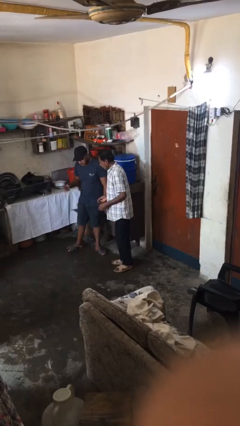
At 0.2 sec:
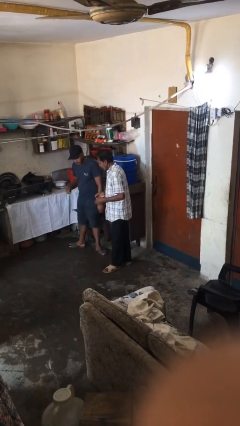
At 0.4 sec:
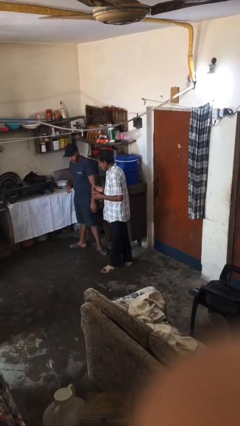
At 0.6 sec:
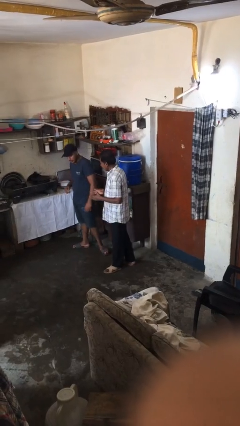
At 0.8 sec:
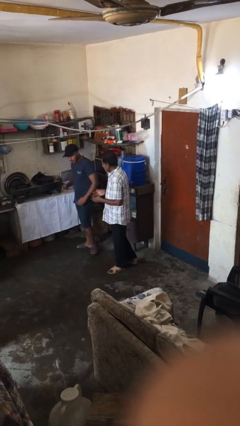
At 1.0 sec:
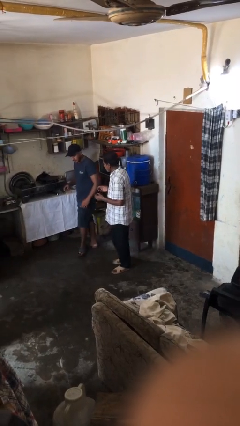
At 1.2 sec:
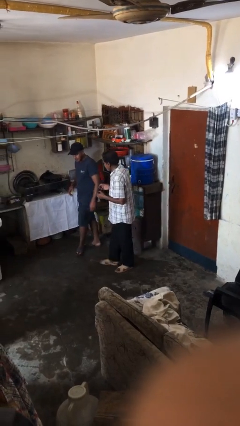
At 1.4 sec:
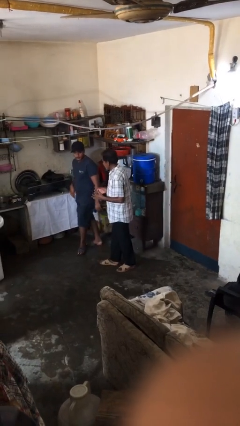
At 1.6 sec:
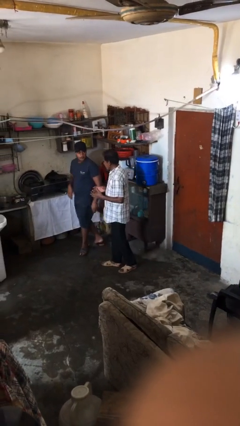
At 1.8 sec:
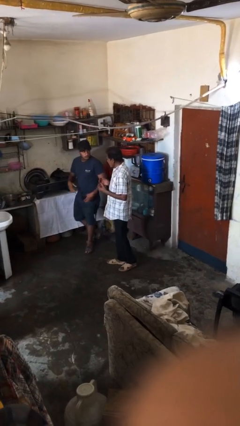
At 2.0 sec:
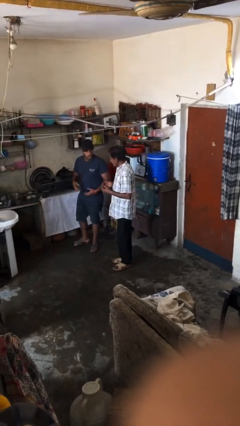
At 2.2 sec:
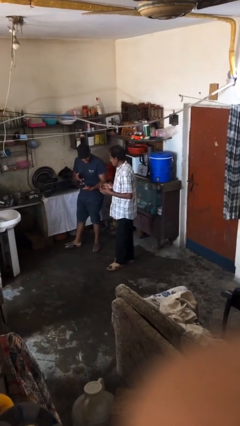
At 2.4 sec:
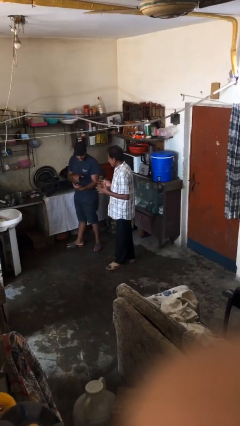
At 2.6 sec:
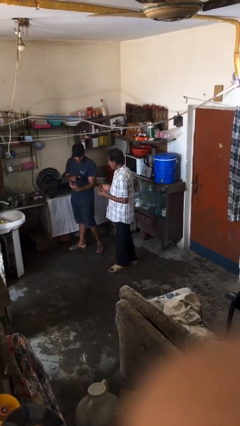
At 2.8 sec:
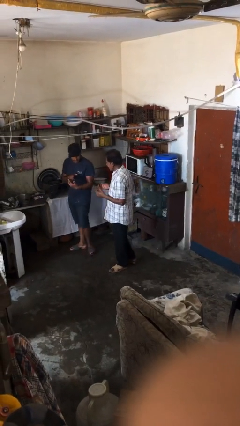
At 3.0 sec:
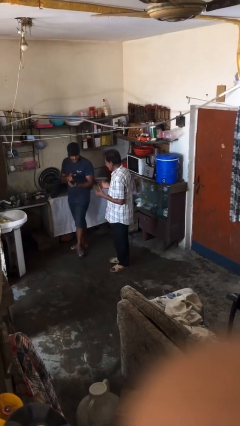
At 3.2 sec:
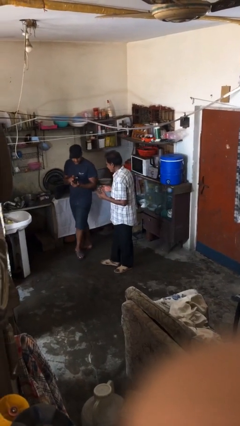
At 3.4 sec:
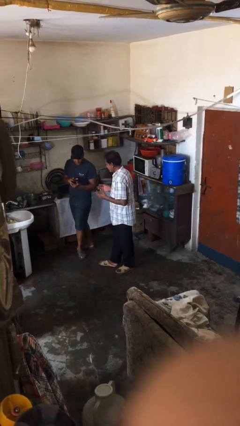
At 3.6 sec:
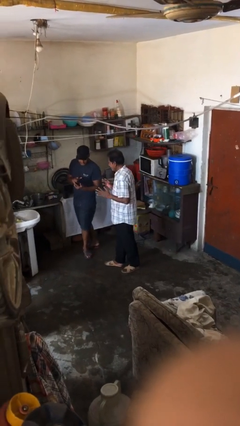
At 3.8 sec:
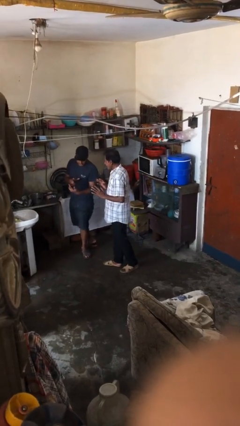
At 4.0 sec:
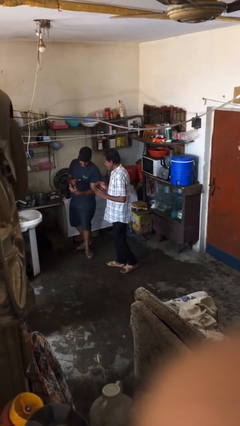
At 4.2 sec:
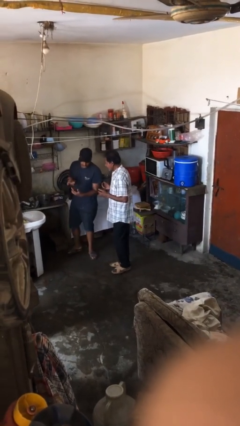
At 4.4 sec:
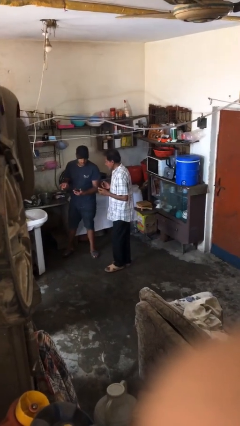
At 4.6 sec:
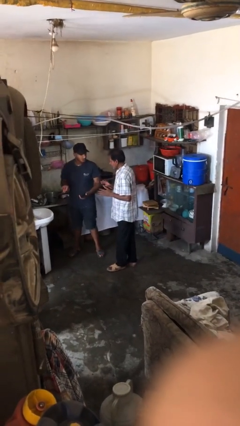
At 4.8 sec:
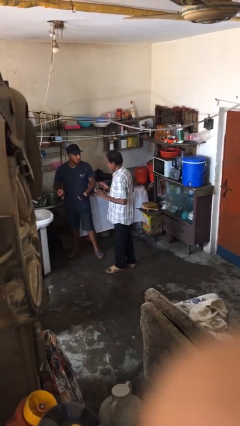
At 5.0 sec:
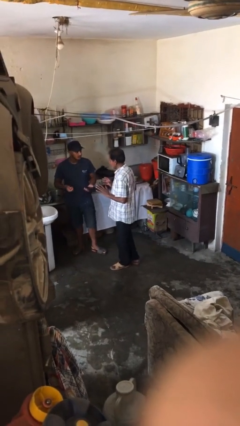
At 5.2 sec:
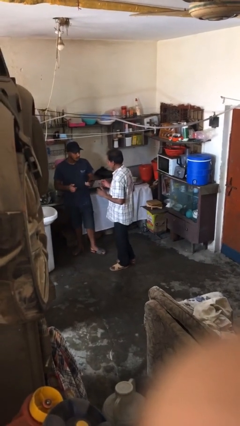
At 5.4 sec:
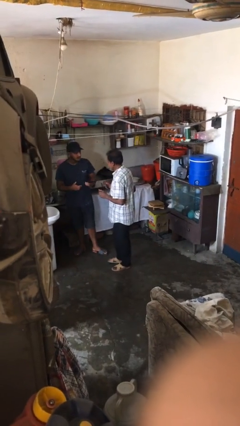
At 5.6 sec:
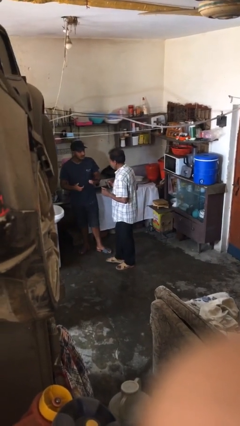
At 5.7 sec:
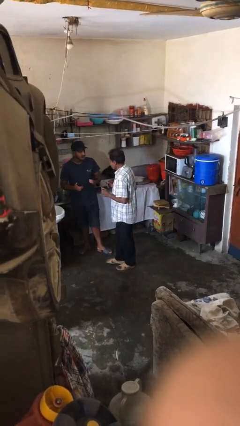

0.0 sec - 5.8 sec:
person talks to person

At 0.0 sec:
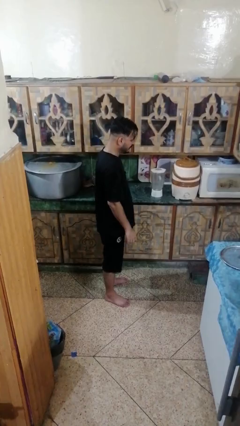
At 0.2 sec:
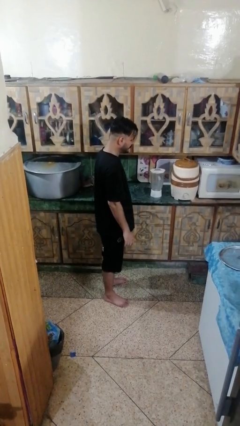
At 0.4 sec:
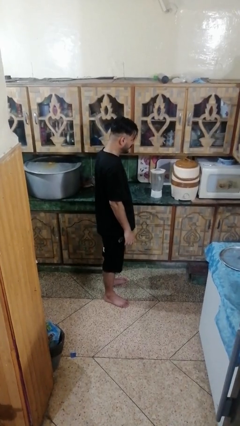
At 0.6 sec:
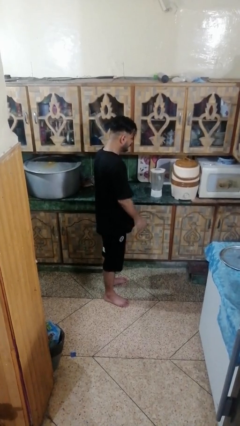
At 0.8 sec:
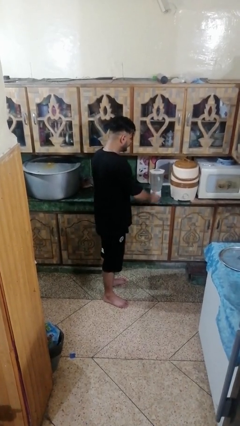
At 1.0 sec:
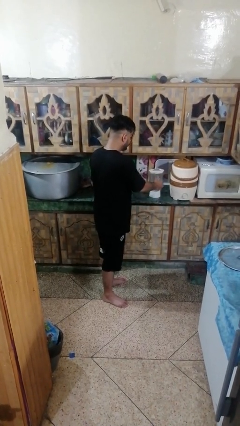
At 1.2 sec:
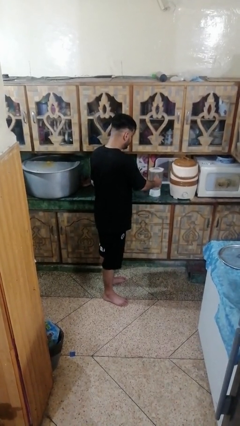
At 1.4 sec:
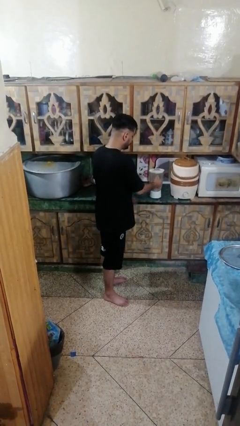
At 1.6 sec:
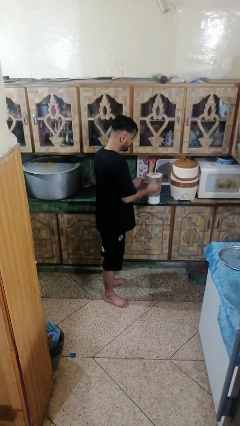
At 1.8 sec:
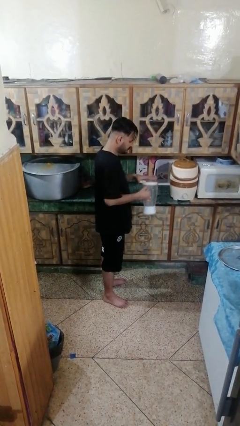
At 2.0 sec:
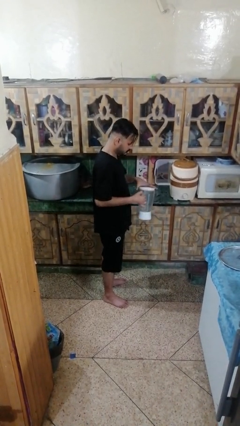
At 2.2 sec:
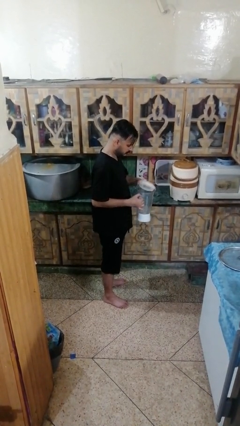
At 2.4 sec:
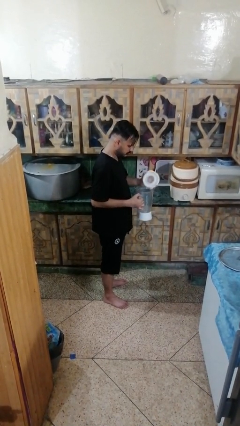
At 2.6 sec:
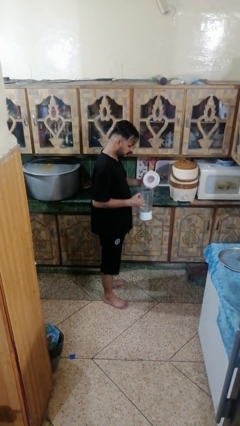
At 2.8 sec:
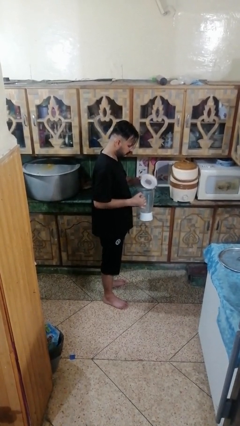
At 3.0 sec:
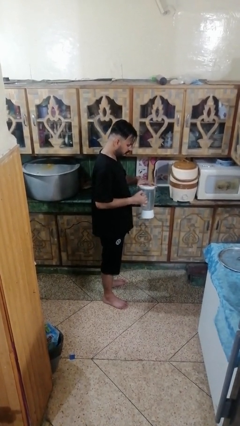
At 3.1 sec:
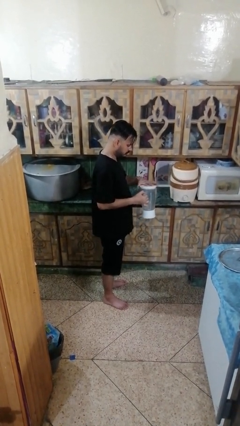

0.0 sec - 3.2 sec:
person picks up object from countertop

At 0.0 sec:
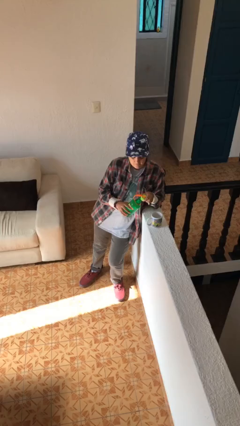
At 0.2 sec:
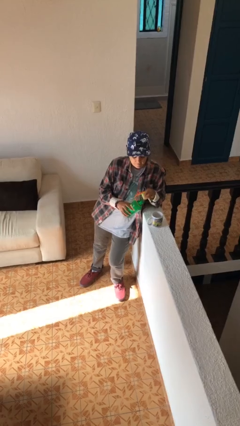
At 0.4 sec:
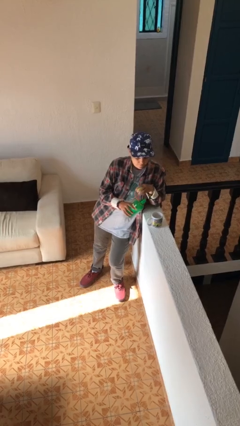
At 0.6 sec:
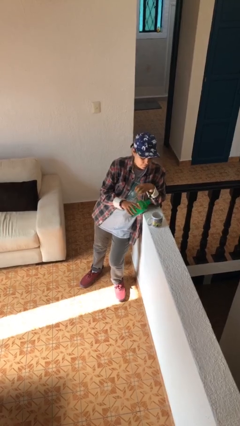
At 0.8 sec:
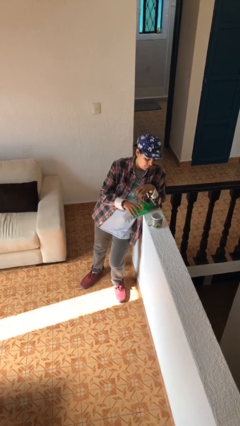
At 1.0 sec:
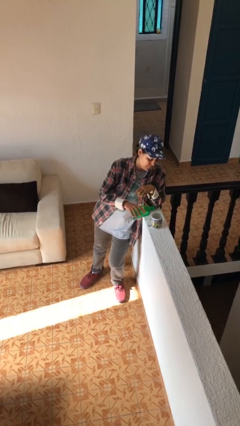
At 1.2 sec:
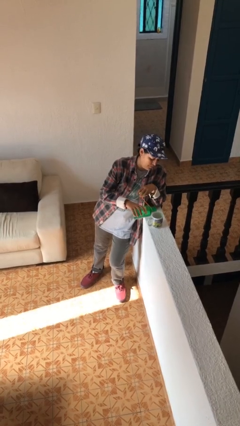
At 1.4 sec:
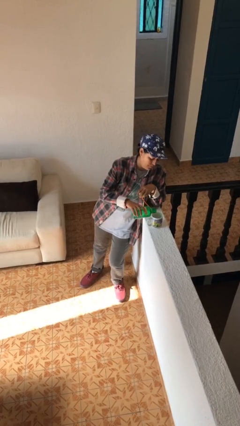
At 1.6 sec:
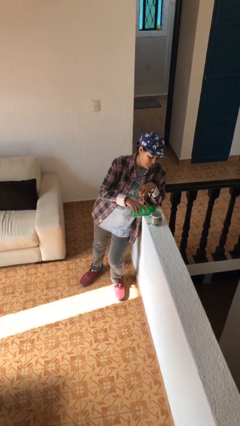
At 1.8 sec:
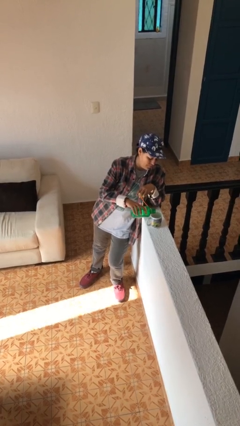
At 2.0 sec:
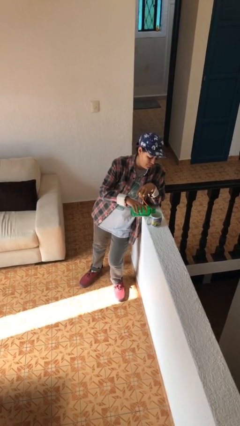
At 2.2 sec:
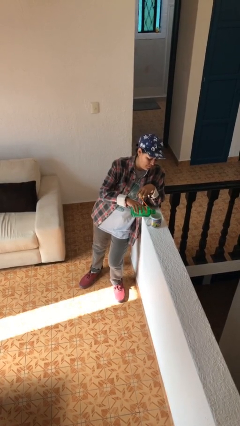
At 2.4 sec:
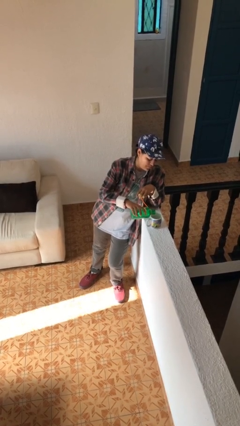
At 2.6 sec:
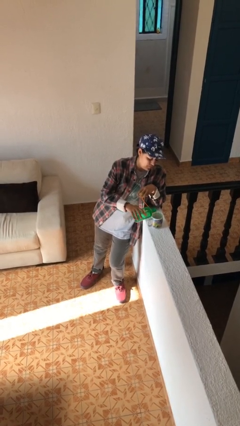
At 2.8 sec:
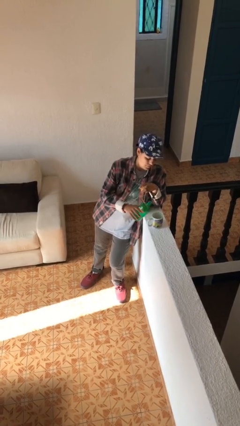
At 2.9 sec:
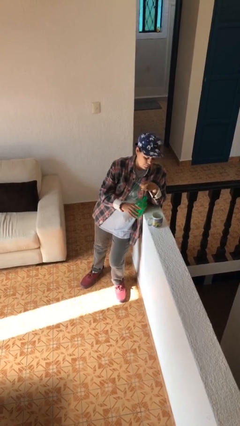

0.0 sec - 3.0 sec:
person pours liquid into cup

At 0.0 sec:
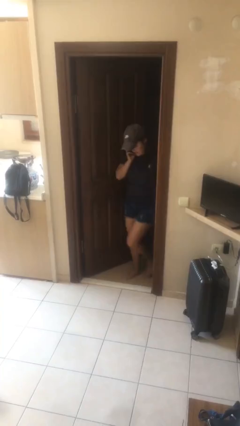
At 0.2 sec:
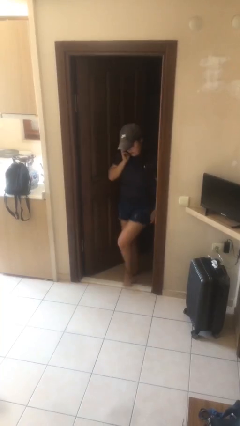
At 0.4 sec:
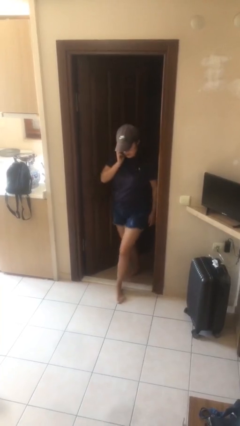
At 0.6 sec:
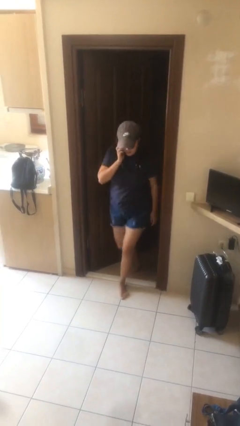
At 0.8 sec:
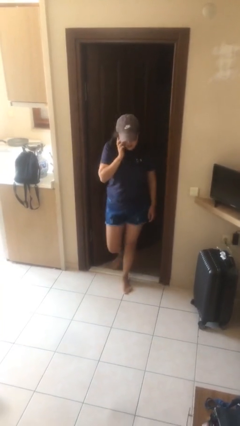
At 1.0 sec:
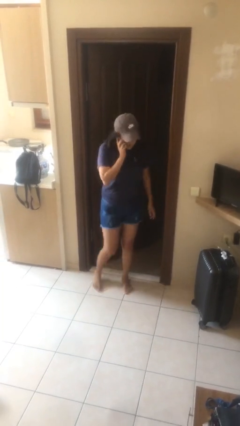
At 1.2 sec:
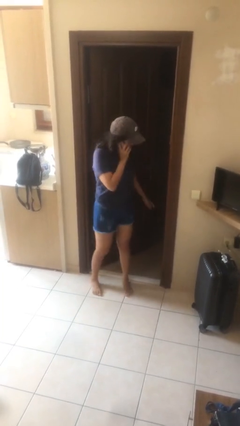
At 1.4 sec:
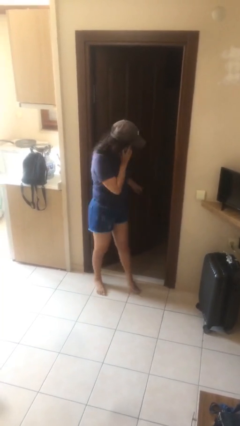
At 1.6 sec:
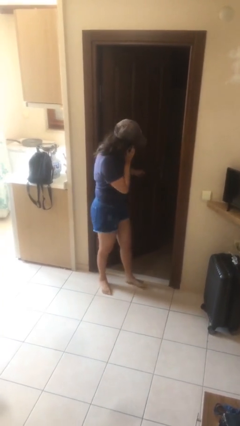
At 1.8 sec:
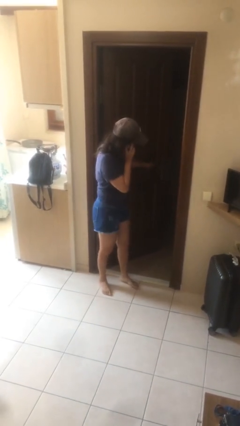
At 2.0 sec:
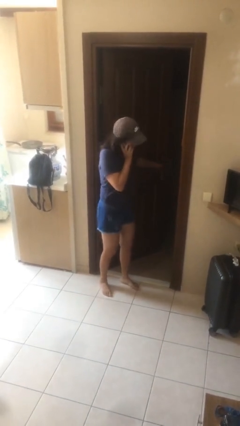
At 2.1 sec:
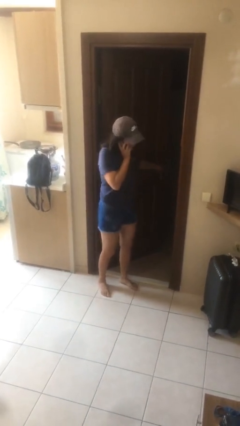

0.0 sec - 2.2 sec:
person enters scene through structure

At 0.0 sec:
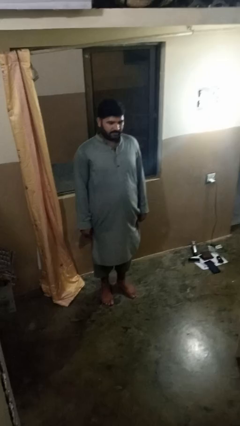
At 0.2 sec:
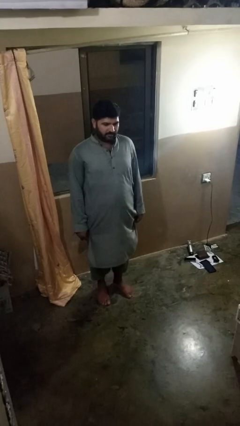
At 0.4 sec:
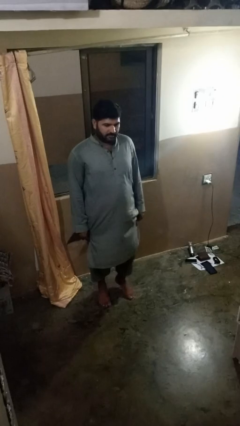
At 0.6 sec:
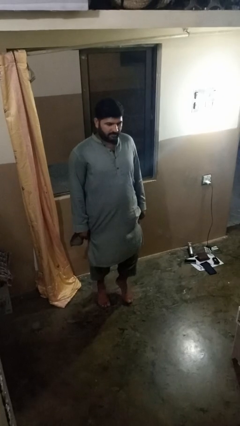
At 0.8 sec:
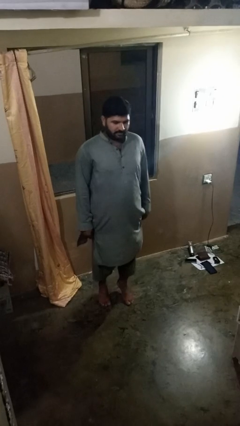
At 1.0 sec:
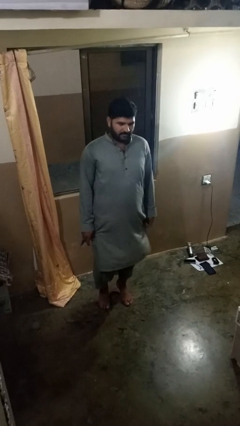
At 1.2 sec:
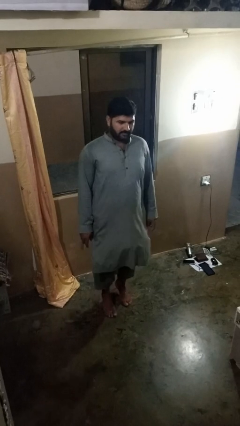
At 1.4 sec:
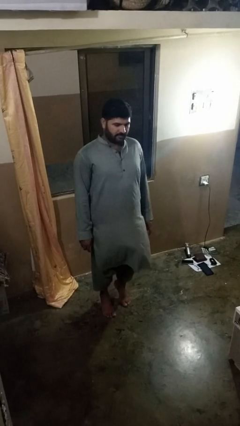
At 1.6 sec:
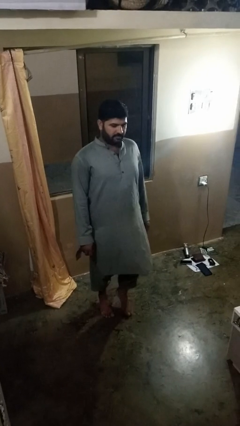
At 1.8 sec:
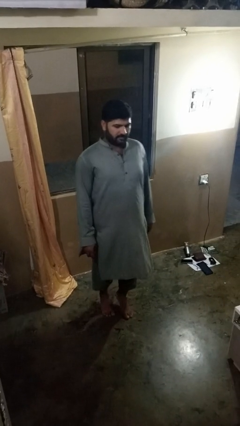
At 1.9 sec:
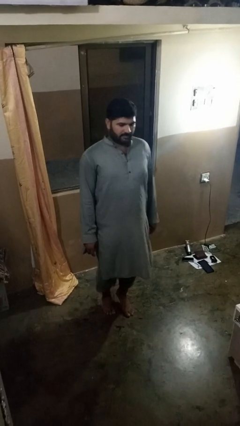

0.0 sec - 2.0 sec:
person walks tiptoe

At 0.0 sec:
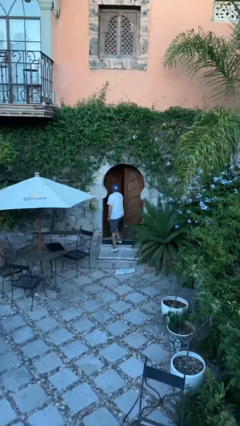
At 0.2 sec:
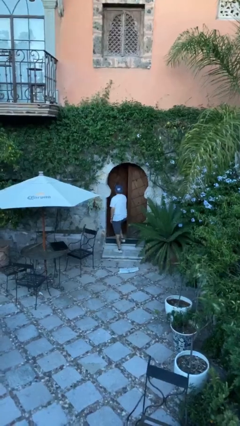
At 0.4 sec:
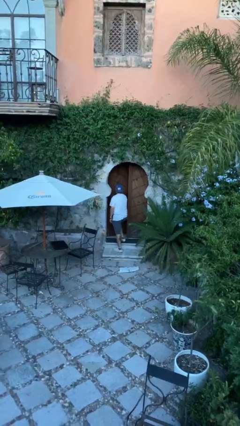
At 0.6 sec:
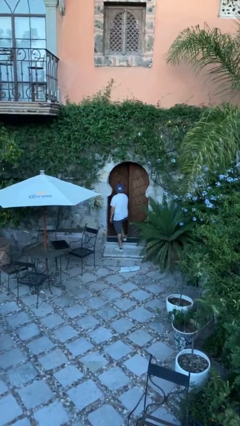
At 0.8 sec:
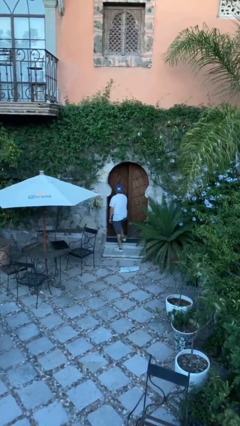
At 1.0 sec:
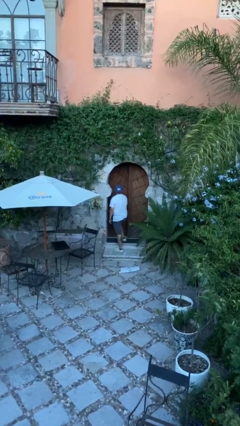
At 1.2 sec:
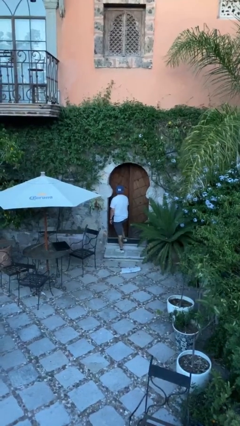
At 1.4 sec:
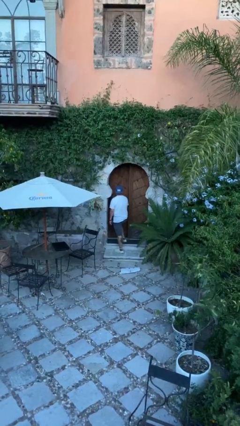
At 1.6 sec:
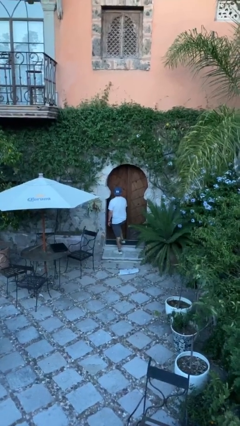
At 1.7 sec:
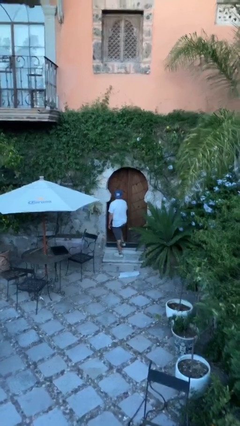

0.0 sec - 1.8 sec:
person closes facility door
